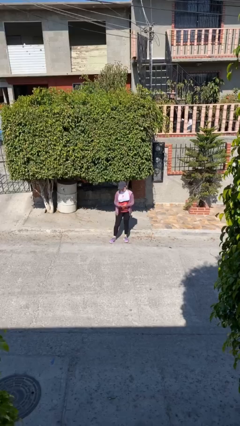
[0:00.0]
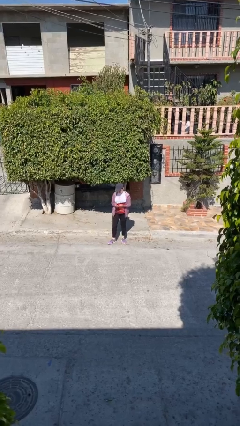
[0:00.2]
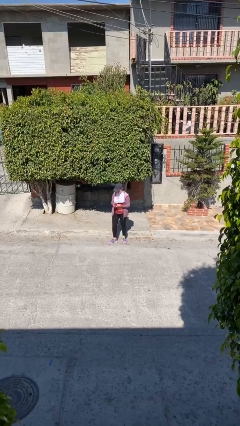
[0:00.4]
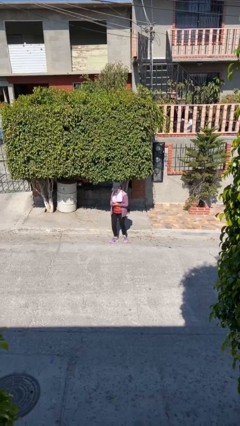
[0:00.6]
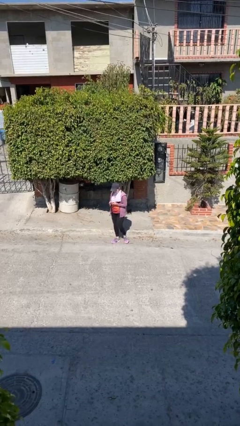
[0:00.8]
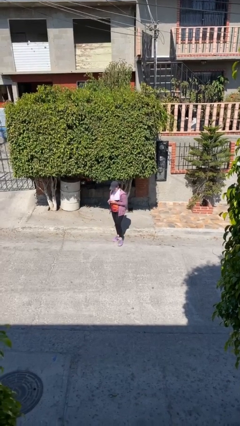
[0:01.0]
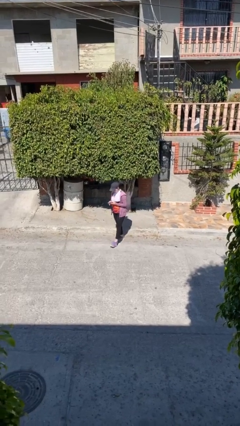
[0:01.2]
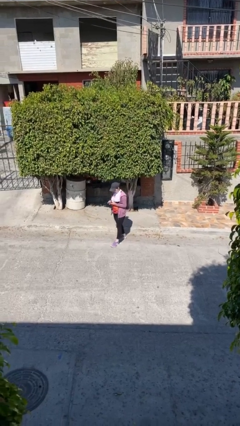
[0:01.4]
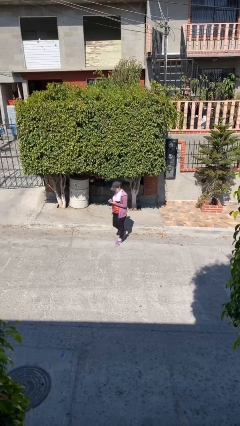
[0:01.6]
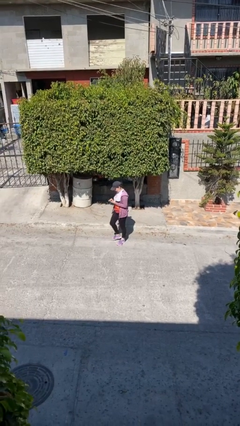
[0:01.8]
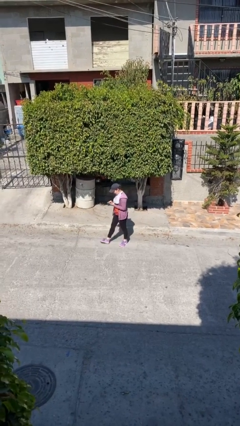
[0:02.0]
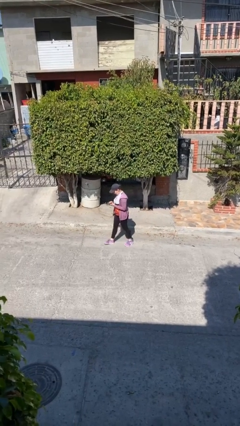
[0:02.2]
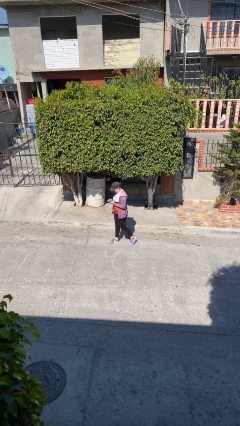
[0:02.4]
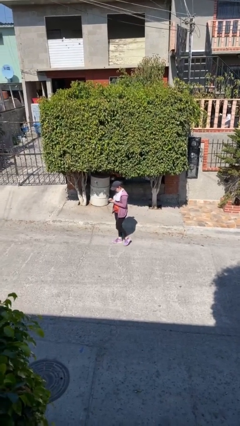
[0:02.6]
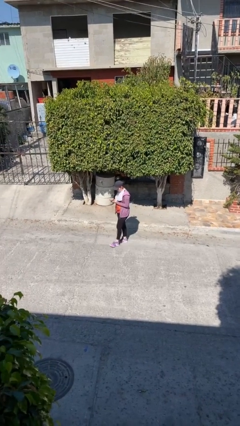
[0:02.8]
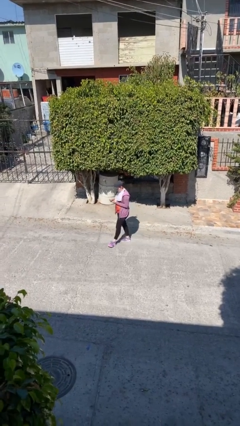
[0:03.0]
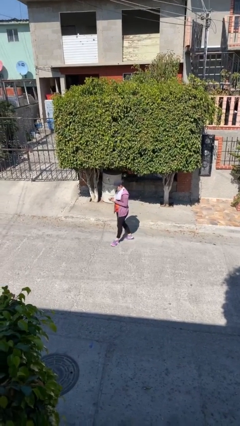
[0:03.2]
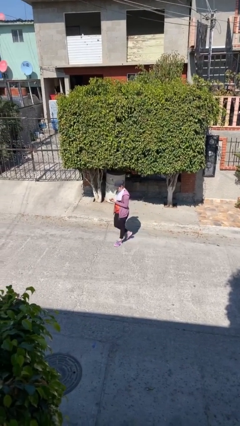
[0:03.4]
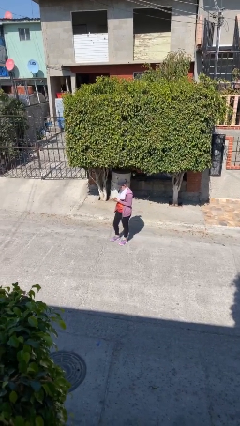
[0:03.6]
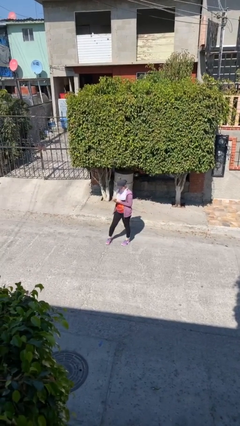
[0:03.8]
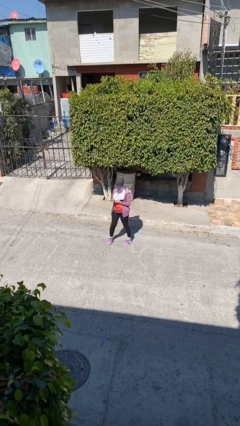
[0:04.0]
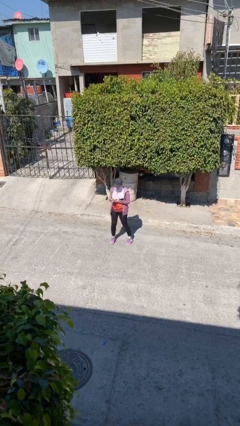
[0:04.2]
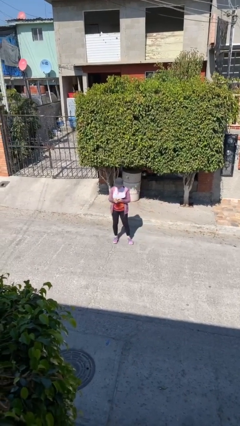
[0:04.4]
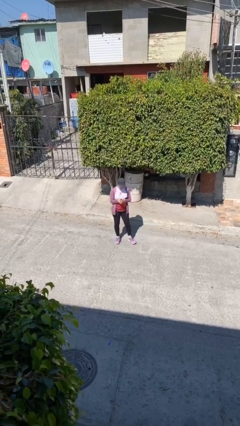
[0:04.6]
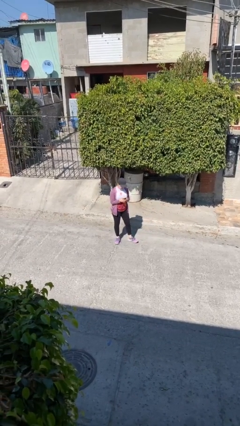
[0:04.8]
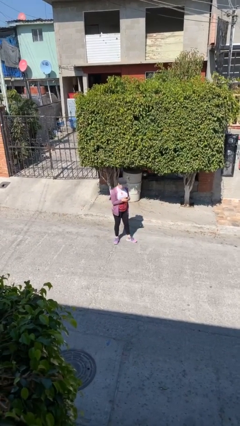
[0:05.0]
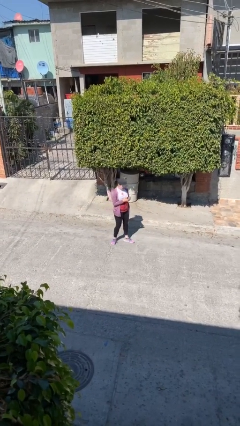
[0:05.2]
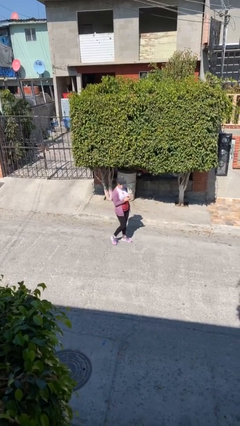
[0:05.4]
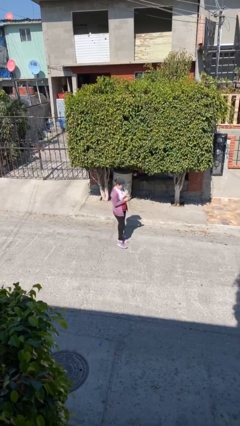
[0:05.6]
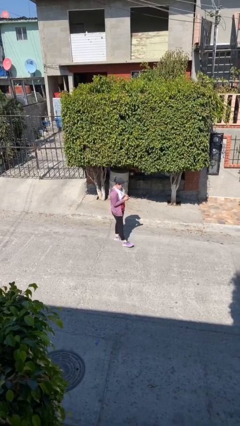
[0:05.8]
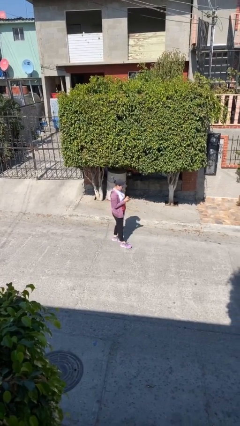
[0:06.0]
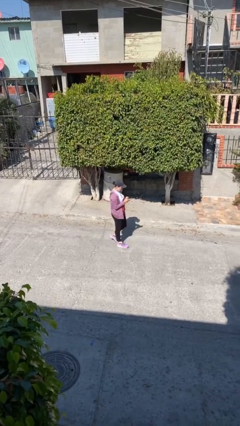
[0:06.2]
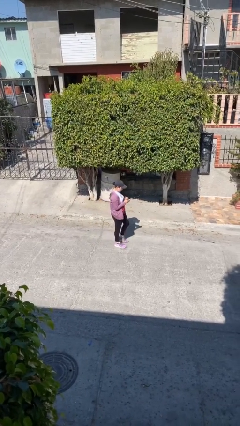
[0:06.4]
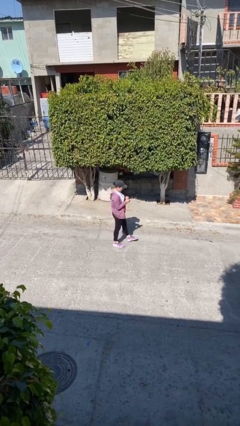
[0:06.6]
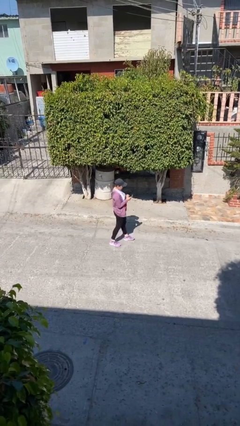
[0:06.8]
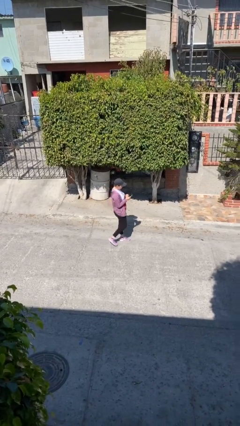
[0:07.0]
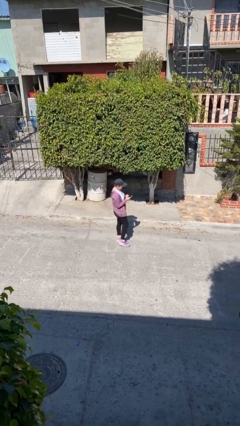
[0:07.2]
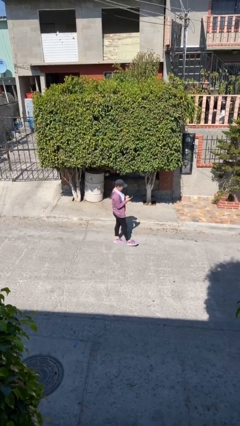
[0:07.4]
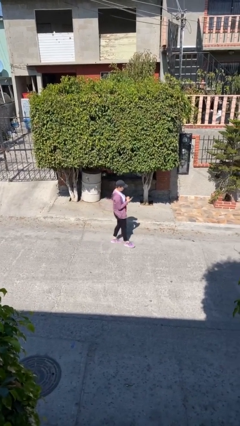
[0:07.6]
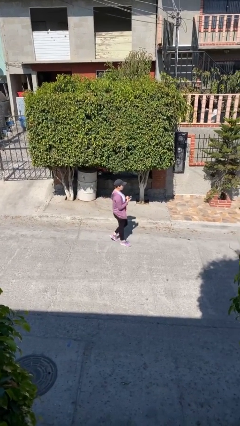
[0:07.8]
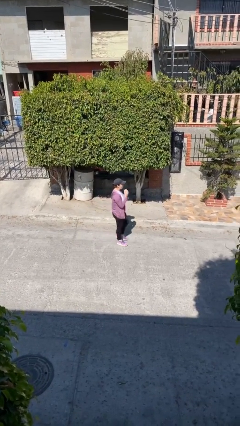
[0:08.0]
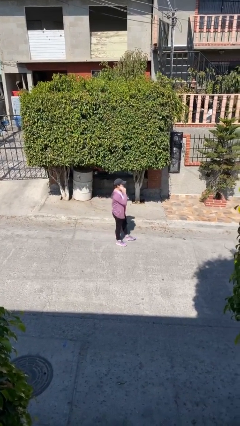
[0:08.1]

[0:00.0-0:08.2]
person texts on phone

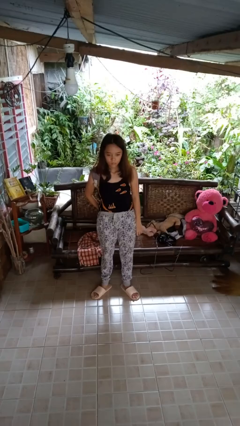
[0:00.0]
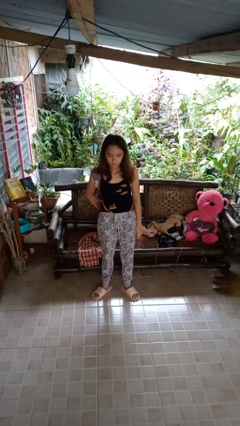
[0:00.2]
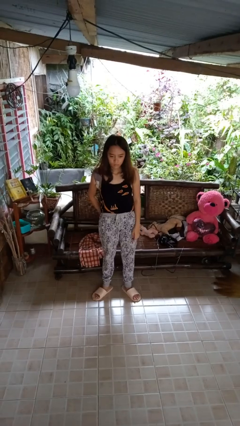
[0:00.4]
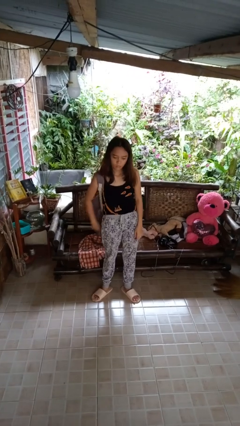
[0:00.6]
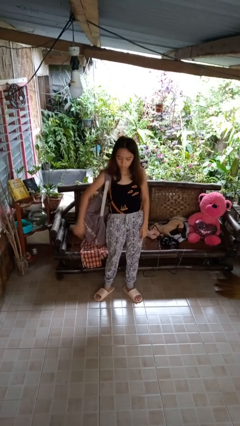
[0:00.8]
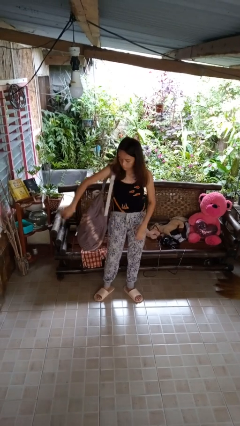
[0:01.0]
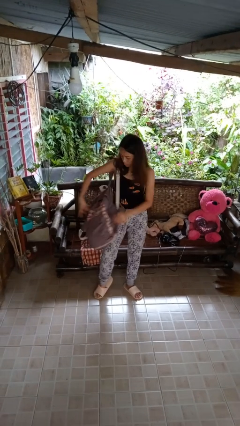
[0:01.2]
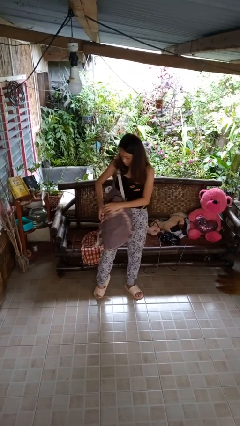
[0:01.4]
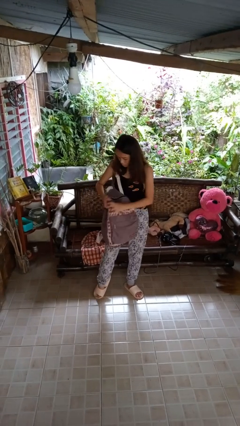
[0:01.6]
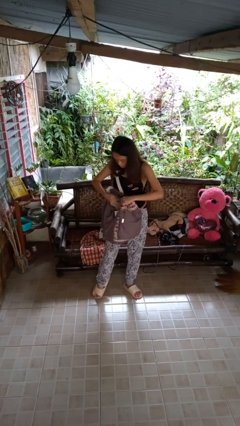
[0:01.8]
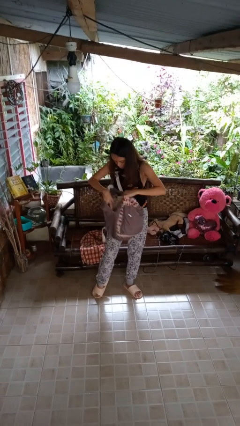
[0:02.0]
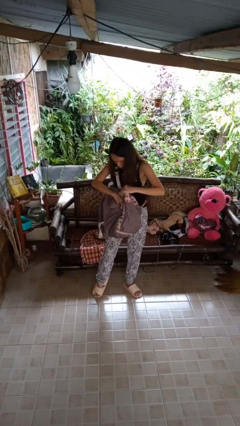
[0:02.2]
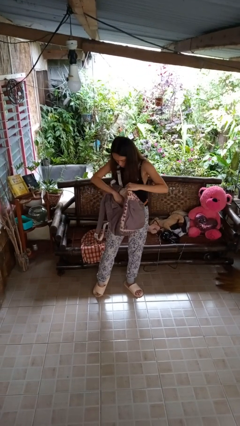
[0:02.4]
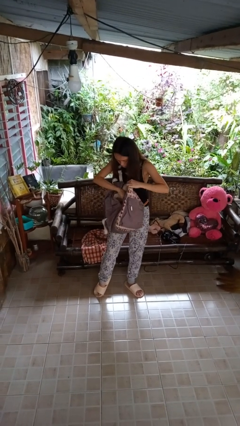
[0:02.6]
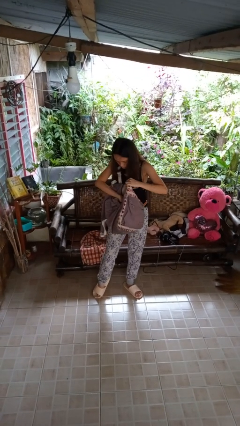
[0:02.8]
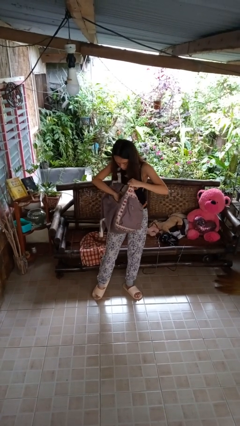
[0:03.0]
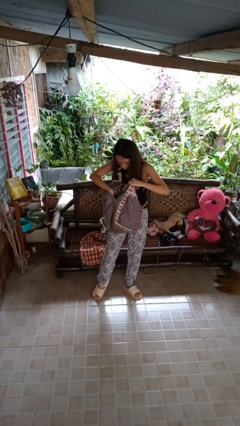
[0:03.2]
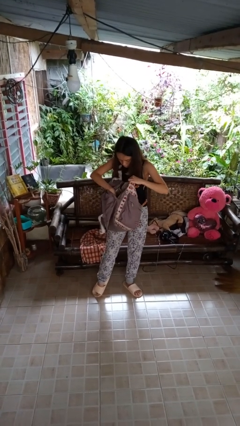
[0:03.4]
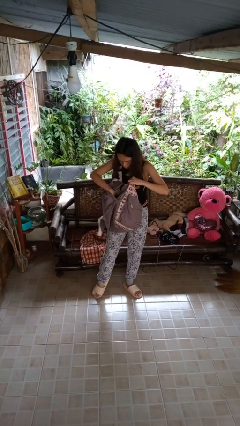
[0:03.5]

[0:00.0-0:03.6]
person searches in backpack

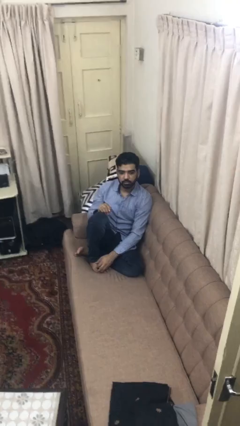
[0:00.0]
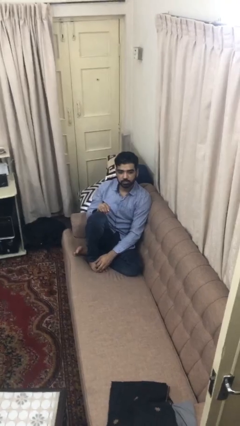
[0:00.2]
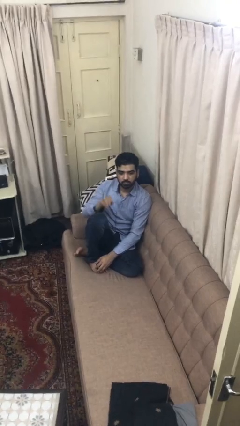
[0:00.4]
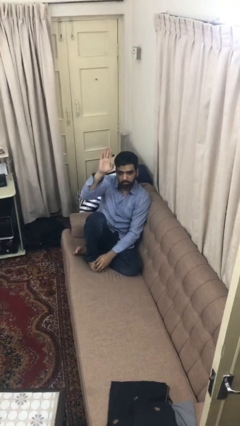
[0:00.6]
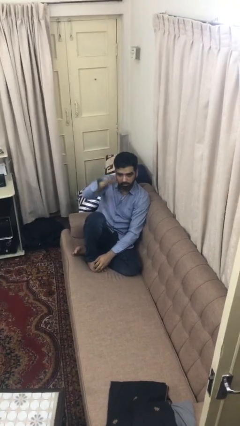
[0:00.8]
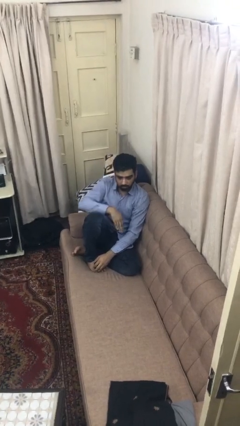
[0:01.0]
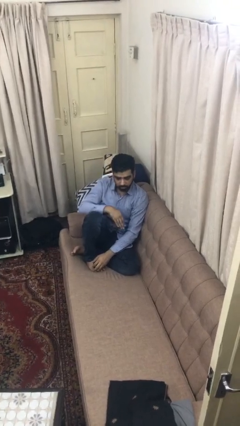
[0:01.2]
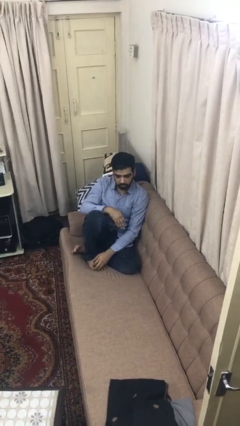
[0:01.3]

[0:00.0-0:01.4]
person gestures swipe down

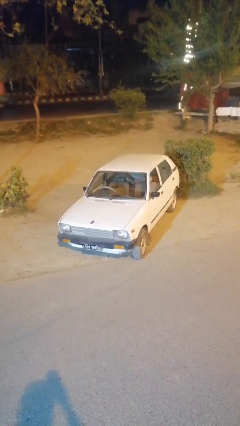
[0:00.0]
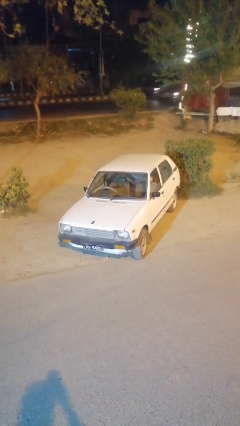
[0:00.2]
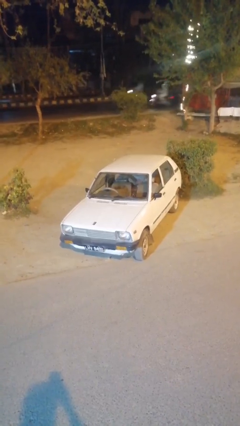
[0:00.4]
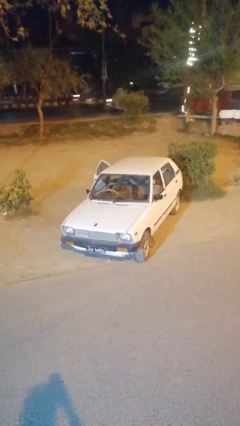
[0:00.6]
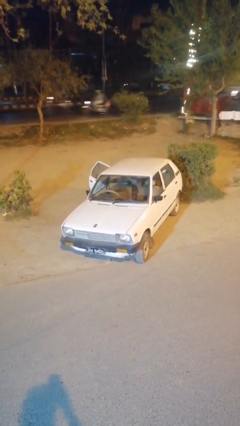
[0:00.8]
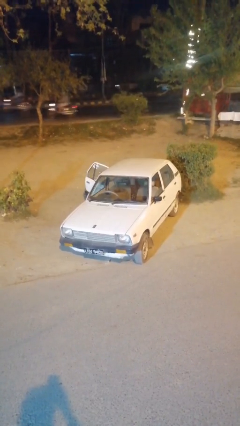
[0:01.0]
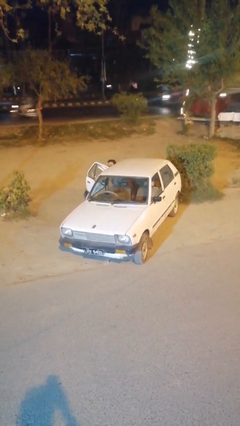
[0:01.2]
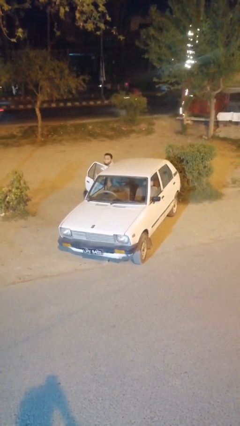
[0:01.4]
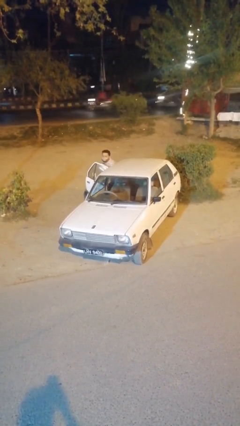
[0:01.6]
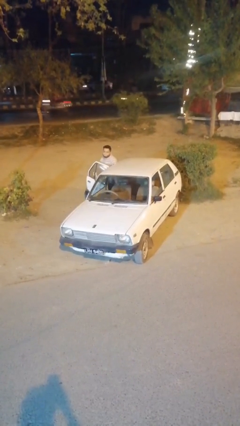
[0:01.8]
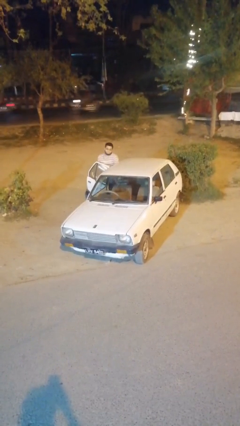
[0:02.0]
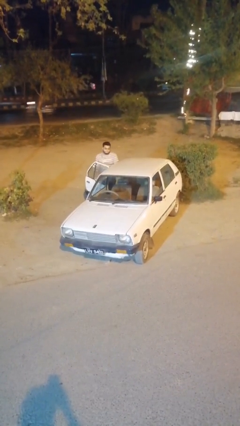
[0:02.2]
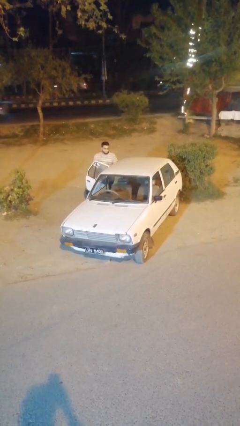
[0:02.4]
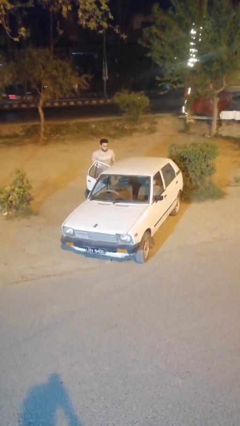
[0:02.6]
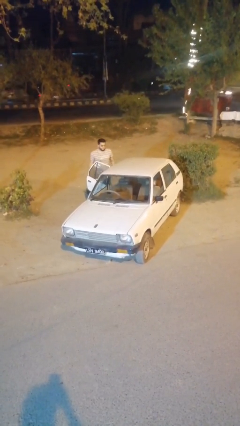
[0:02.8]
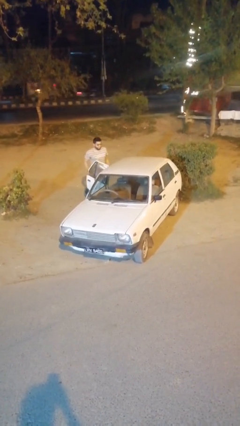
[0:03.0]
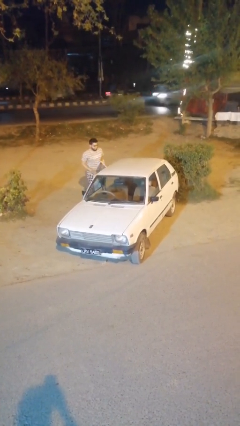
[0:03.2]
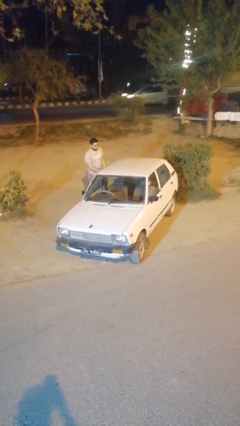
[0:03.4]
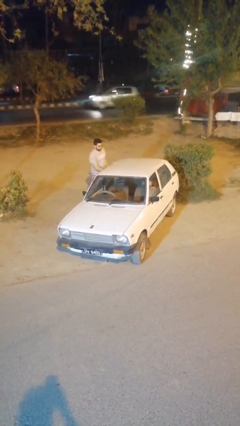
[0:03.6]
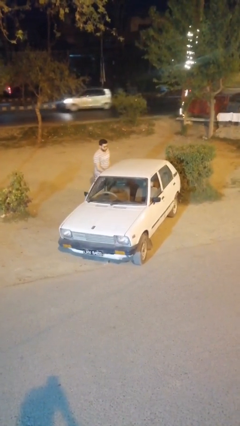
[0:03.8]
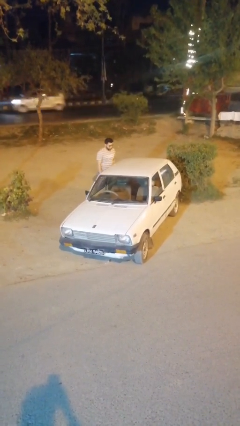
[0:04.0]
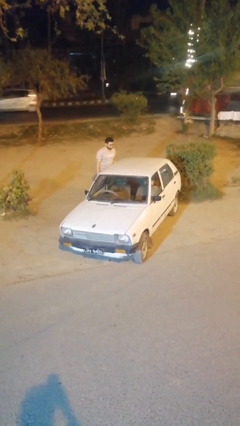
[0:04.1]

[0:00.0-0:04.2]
car drops off person

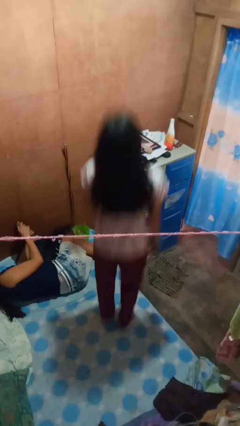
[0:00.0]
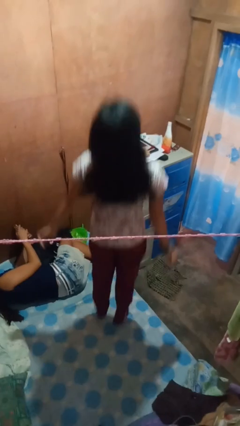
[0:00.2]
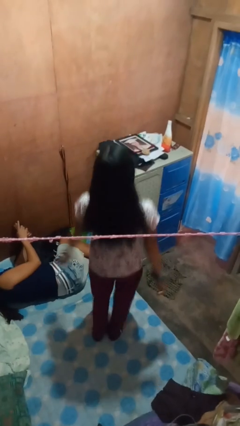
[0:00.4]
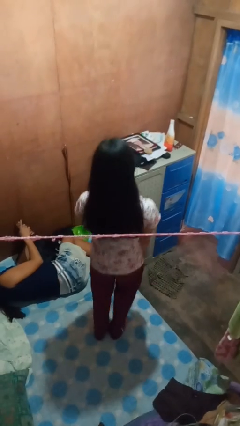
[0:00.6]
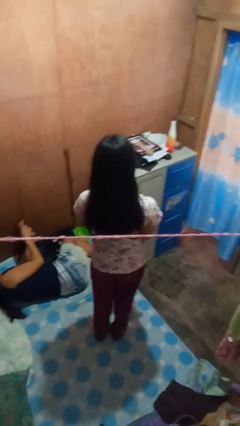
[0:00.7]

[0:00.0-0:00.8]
person jumps on bed
